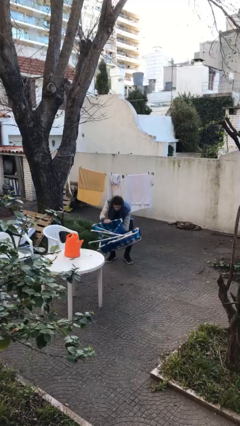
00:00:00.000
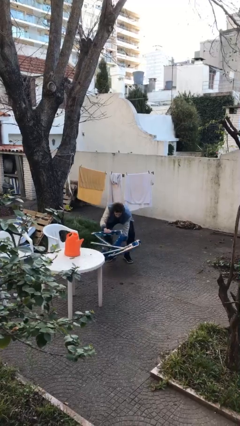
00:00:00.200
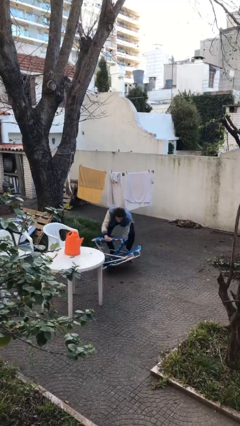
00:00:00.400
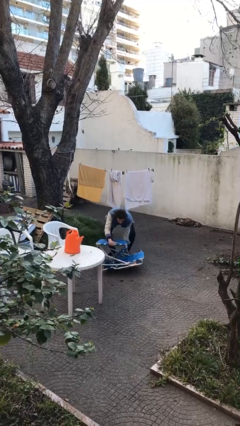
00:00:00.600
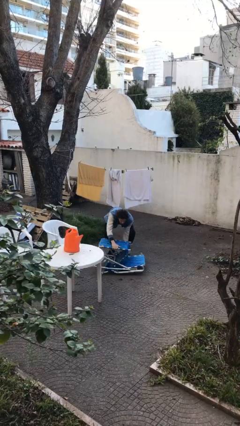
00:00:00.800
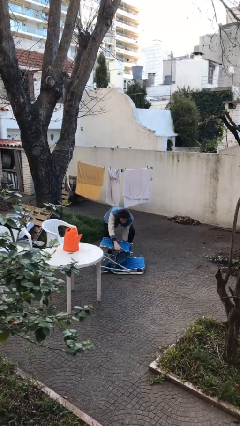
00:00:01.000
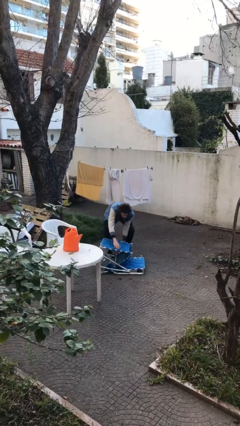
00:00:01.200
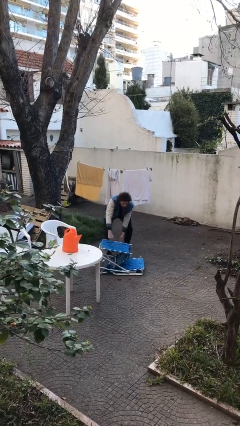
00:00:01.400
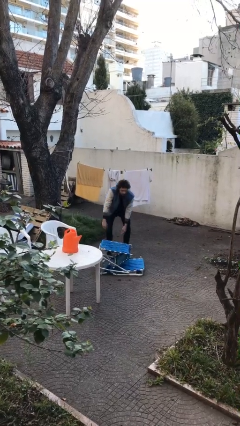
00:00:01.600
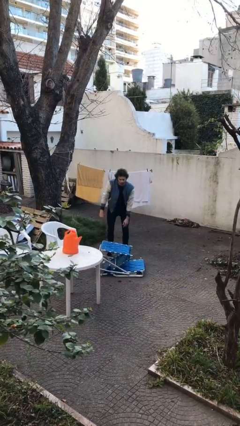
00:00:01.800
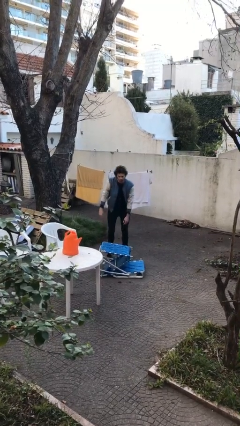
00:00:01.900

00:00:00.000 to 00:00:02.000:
person puts down object on floor

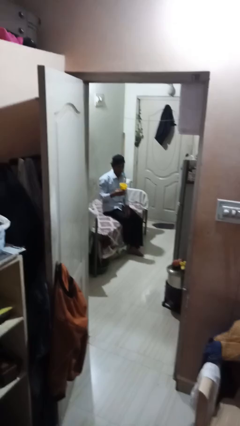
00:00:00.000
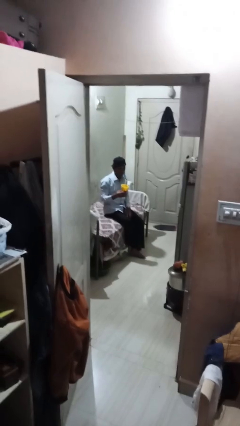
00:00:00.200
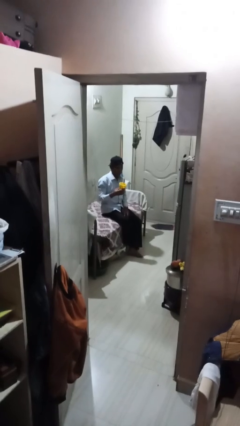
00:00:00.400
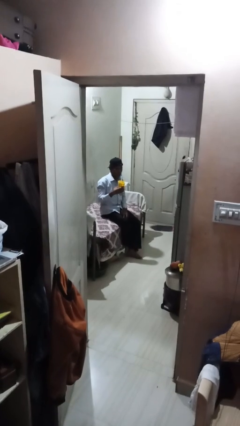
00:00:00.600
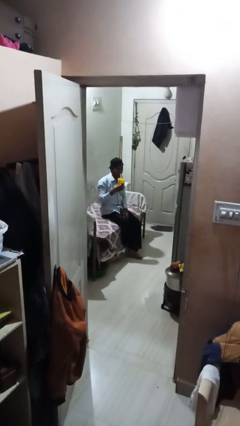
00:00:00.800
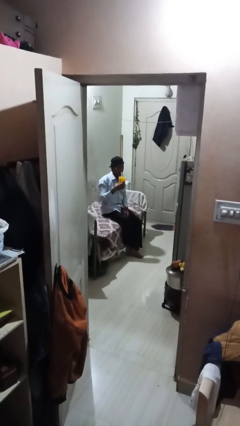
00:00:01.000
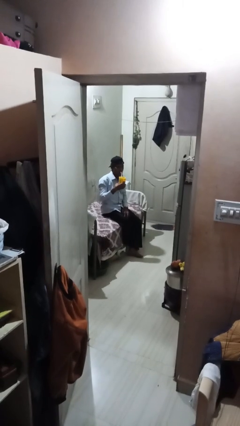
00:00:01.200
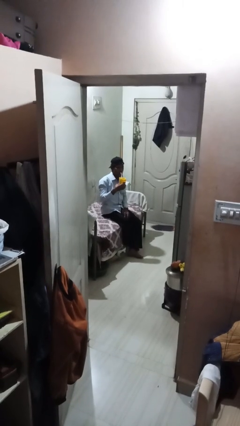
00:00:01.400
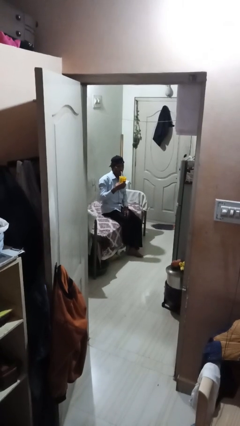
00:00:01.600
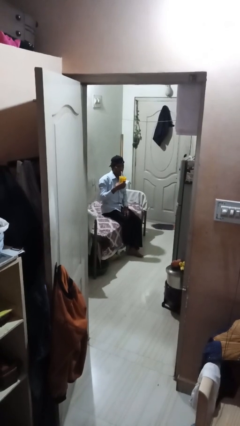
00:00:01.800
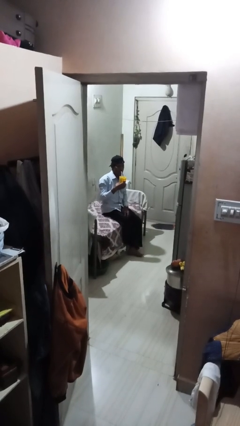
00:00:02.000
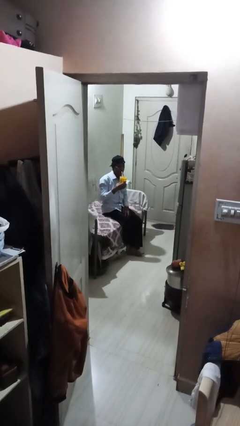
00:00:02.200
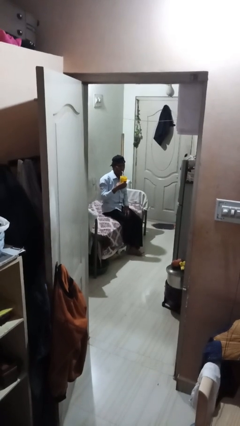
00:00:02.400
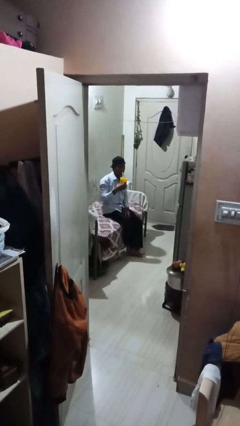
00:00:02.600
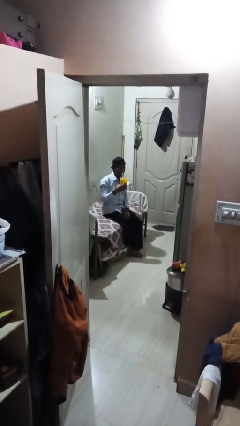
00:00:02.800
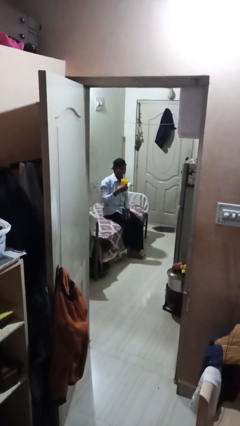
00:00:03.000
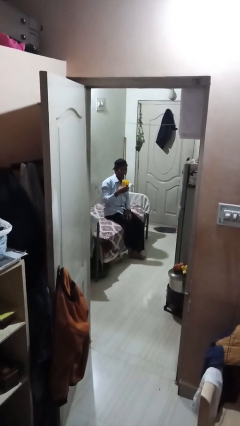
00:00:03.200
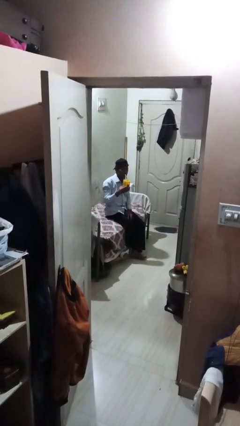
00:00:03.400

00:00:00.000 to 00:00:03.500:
person drinks from straw

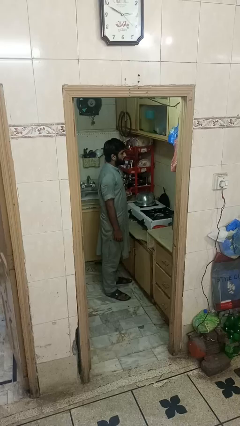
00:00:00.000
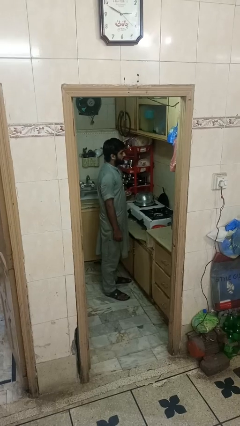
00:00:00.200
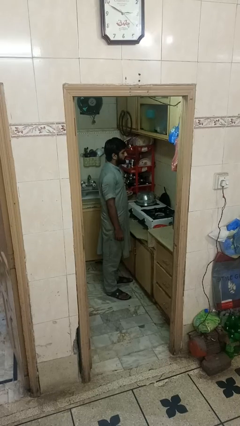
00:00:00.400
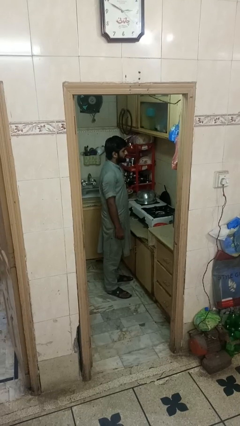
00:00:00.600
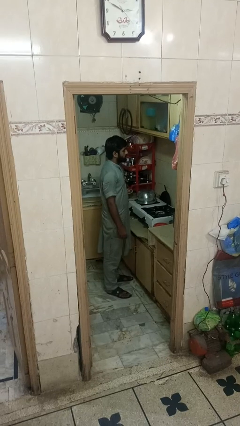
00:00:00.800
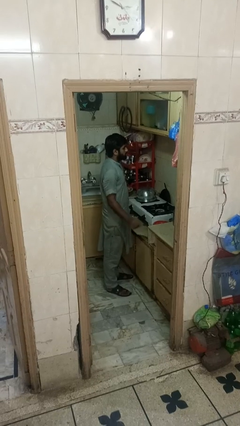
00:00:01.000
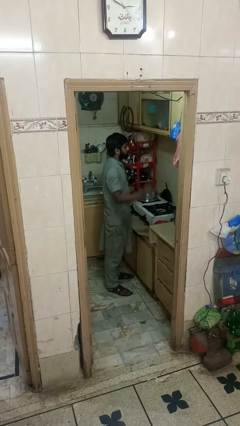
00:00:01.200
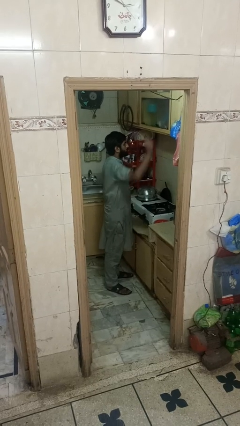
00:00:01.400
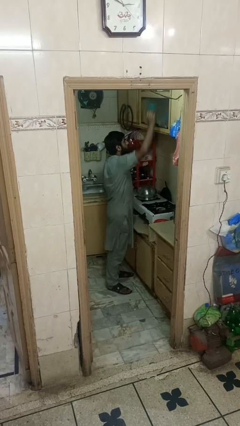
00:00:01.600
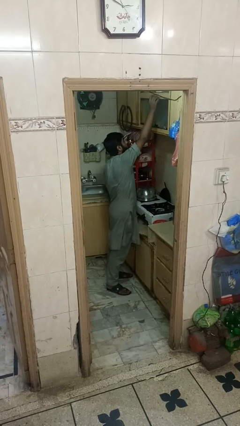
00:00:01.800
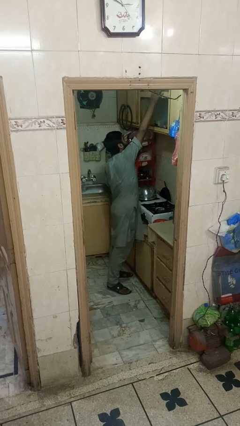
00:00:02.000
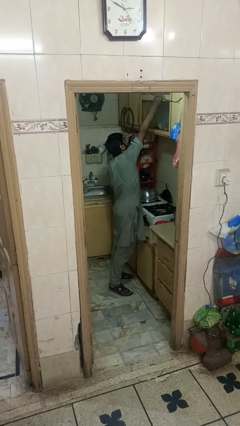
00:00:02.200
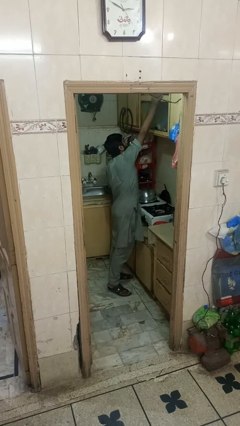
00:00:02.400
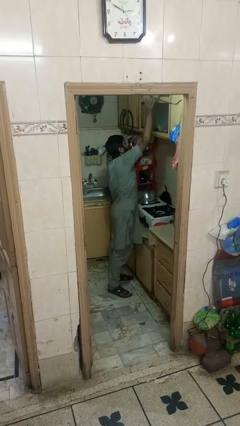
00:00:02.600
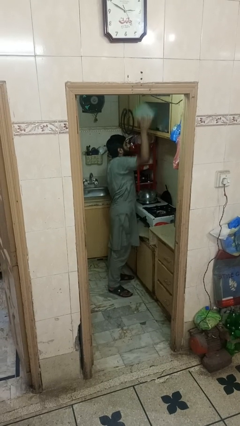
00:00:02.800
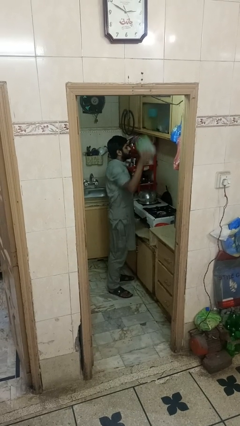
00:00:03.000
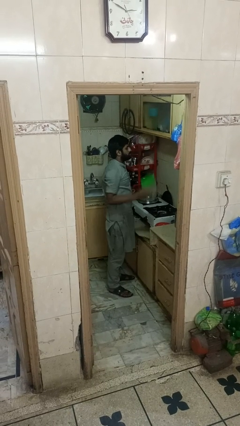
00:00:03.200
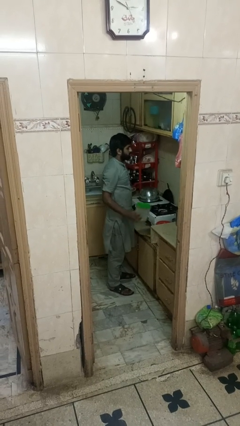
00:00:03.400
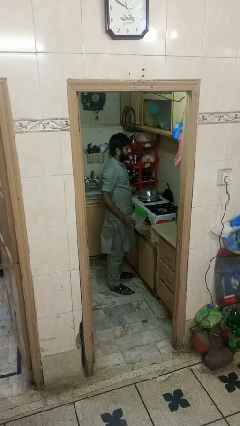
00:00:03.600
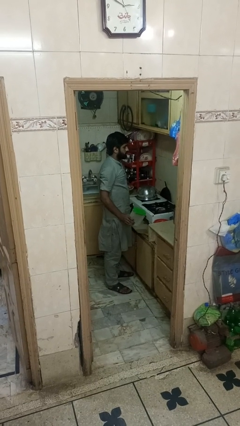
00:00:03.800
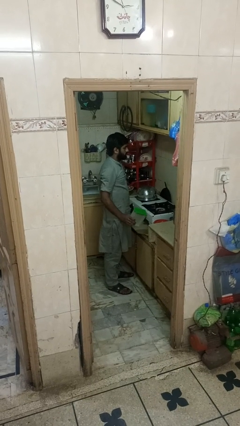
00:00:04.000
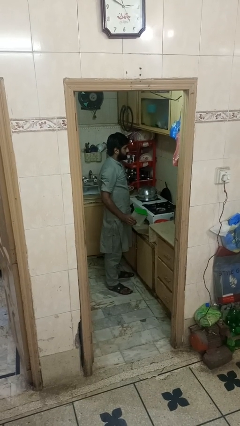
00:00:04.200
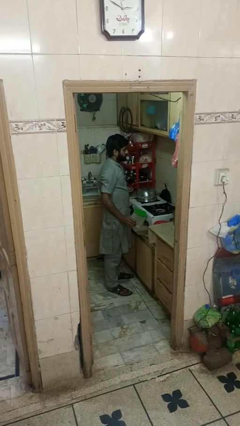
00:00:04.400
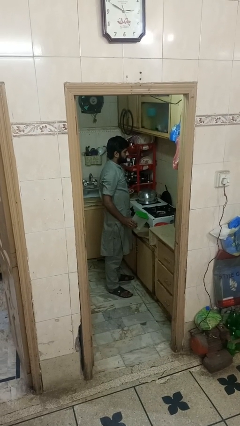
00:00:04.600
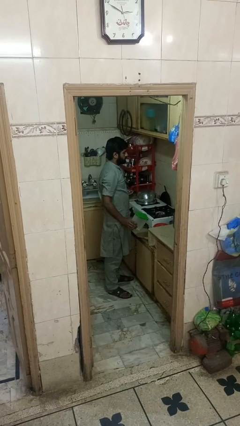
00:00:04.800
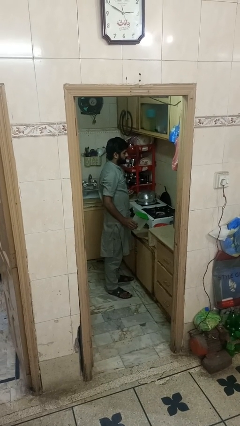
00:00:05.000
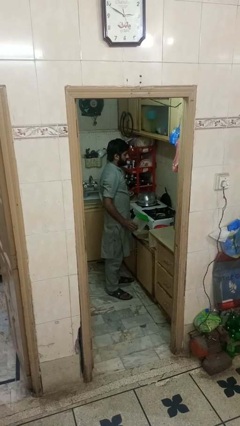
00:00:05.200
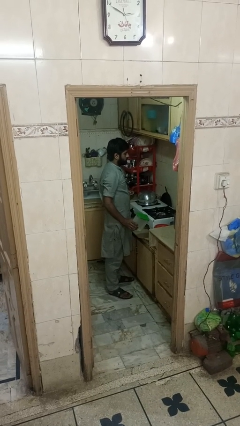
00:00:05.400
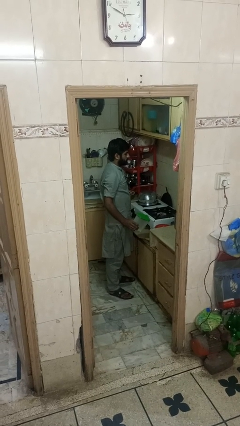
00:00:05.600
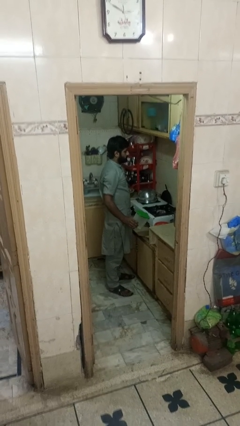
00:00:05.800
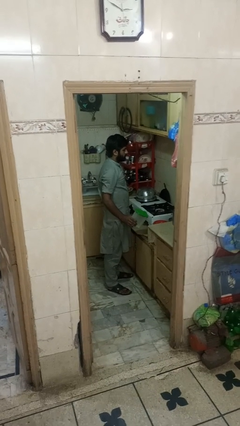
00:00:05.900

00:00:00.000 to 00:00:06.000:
person picks up object from shelf

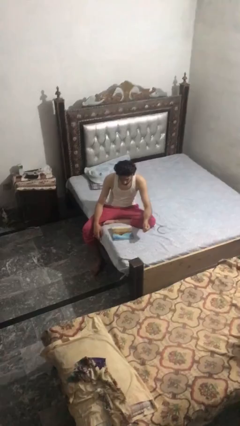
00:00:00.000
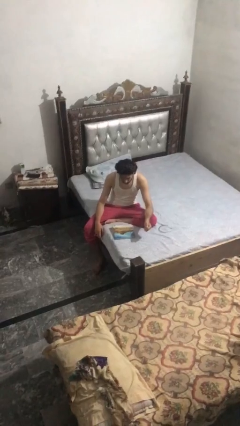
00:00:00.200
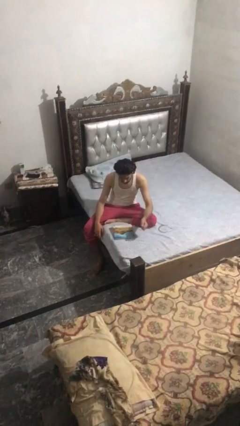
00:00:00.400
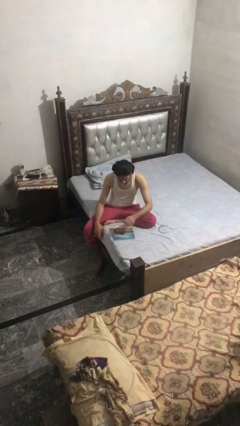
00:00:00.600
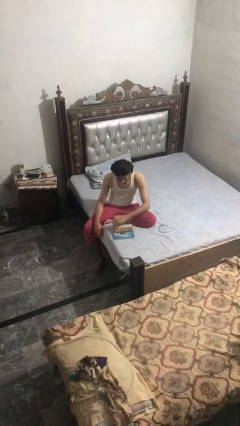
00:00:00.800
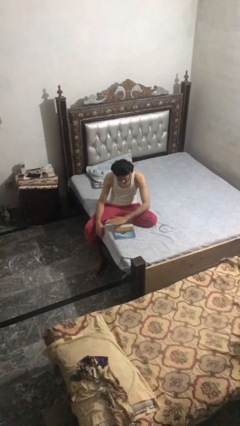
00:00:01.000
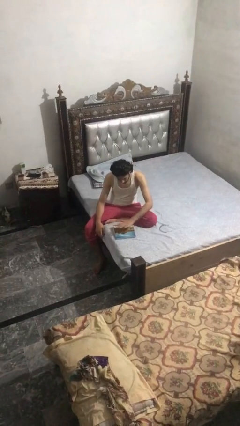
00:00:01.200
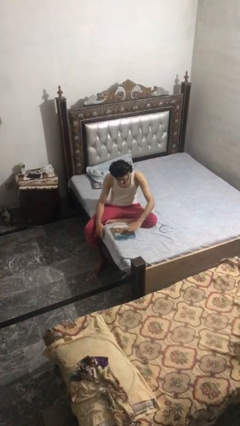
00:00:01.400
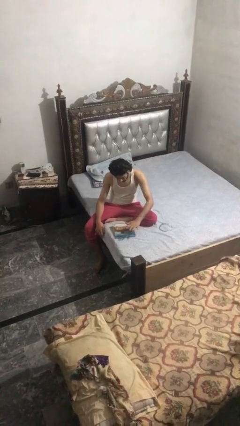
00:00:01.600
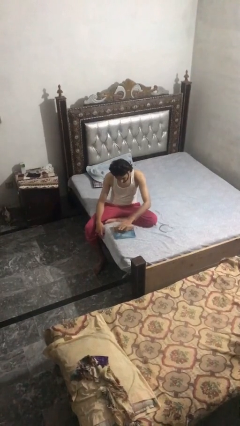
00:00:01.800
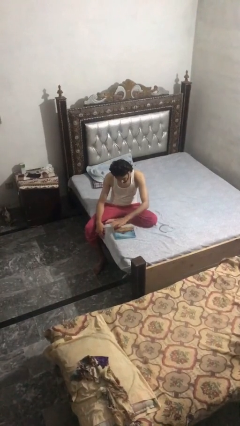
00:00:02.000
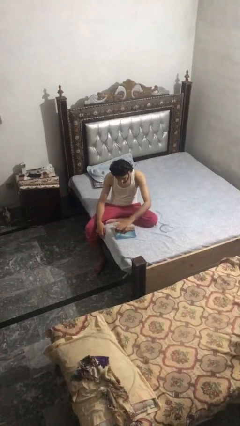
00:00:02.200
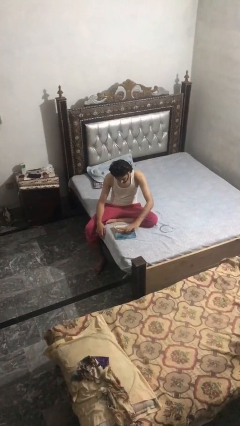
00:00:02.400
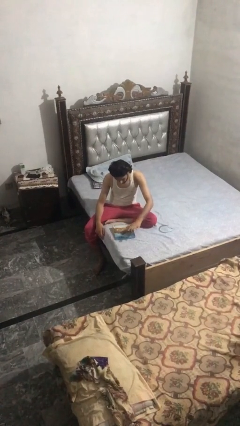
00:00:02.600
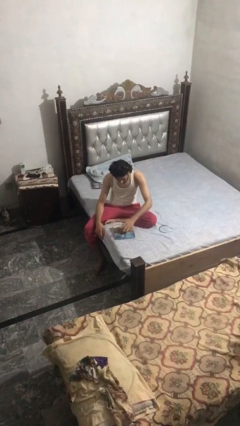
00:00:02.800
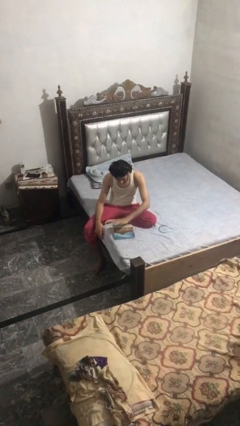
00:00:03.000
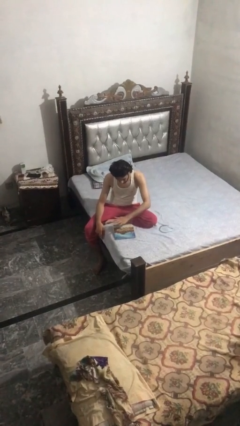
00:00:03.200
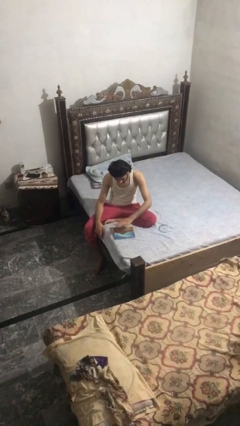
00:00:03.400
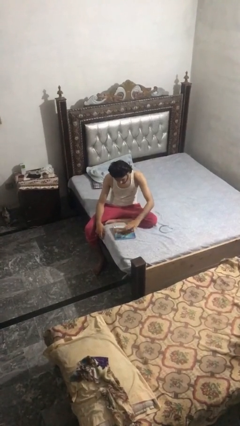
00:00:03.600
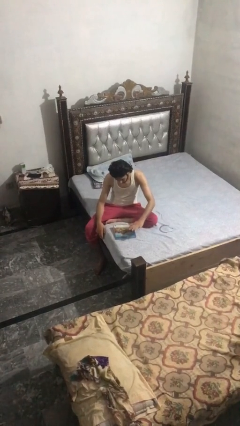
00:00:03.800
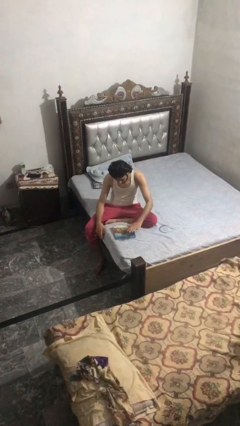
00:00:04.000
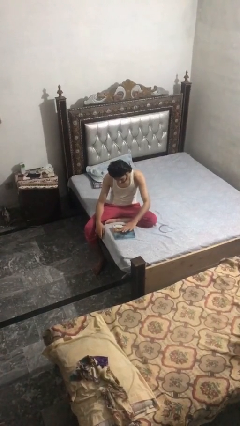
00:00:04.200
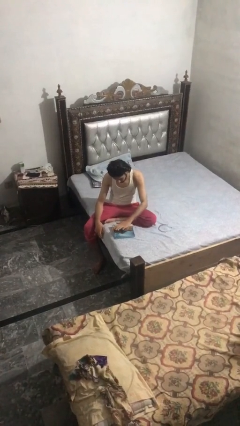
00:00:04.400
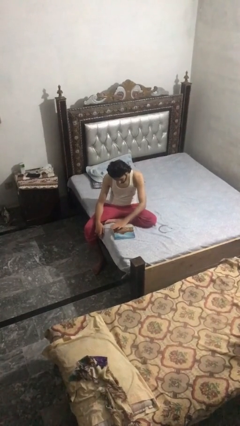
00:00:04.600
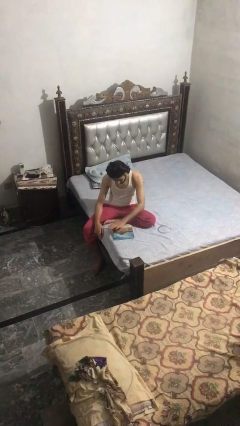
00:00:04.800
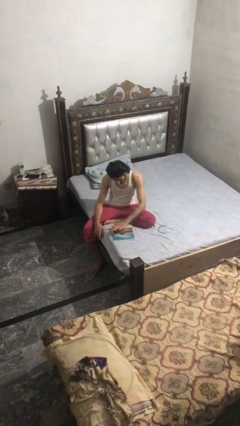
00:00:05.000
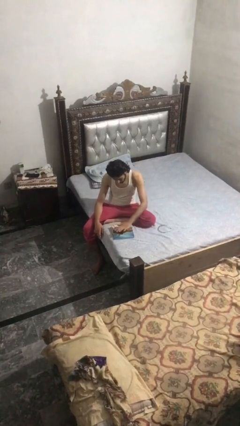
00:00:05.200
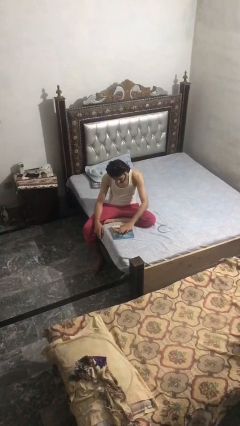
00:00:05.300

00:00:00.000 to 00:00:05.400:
person waves hand over object

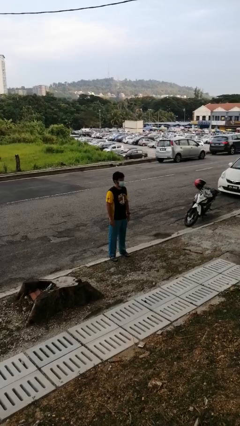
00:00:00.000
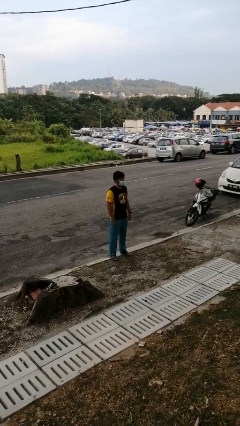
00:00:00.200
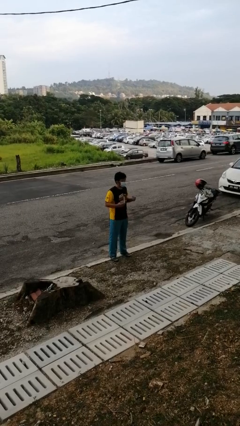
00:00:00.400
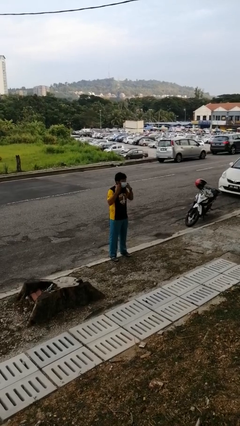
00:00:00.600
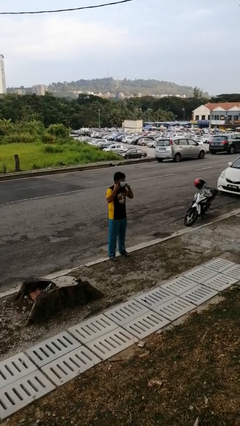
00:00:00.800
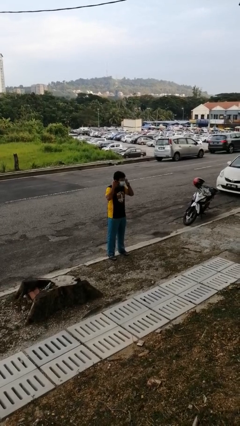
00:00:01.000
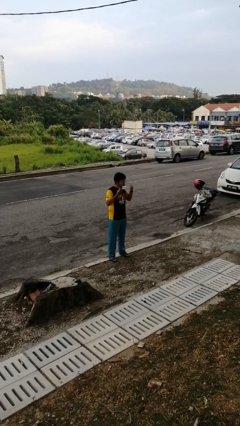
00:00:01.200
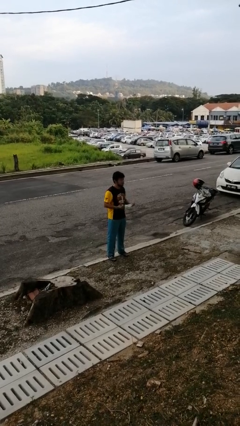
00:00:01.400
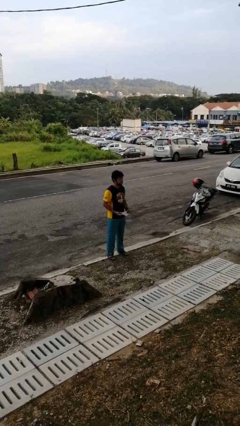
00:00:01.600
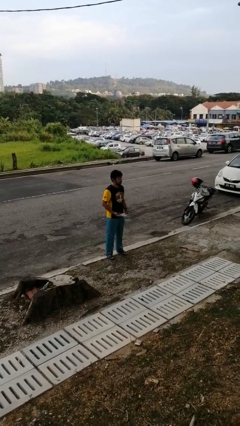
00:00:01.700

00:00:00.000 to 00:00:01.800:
person takes off facemask
